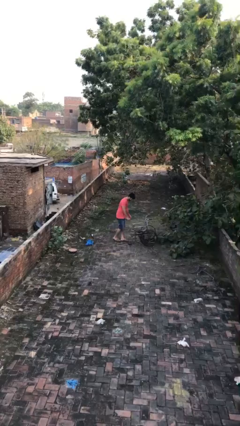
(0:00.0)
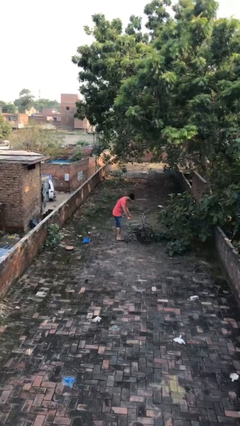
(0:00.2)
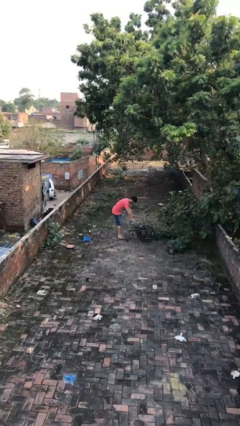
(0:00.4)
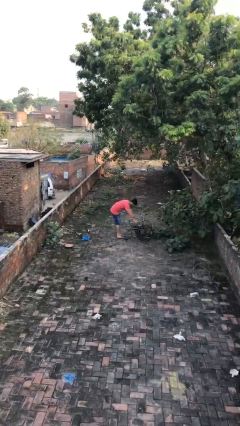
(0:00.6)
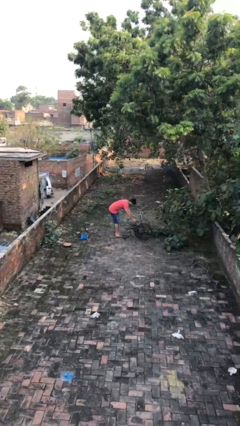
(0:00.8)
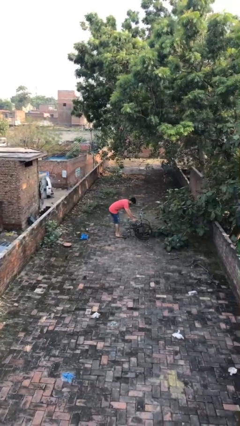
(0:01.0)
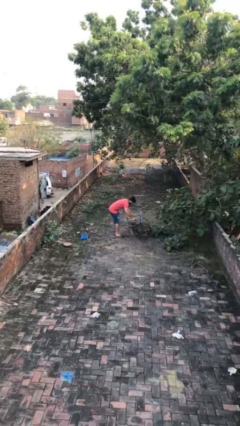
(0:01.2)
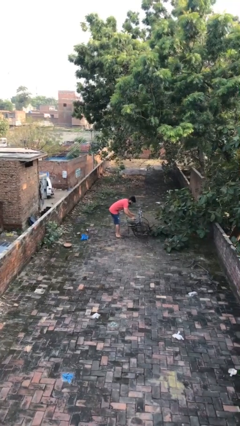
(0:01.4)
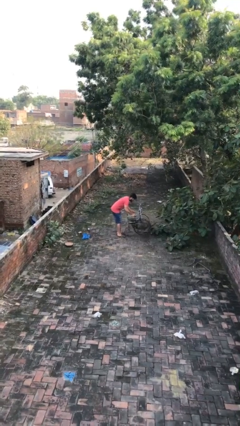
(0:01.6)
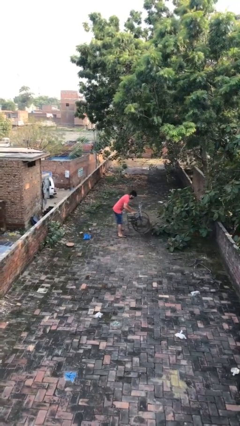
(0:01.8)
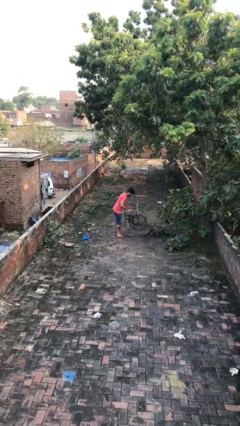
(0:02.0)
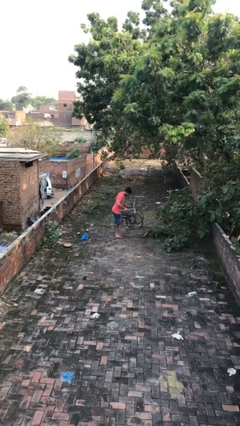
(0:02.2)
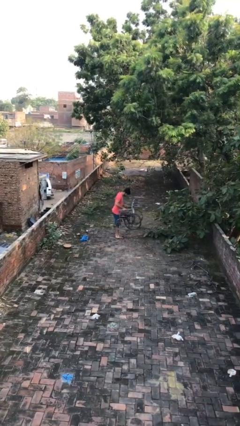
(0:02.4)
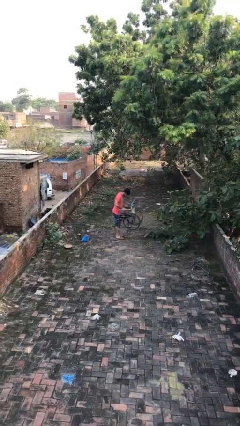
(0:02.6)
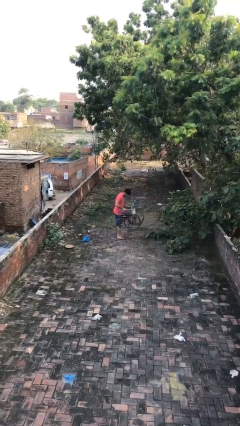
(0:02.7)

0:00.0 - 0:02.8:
person picks up object from floor

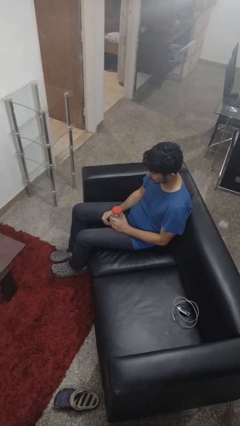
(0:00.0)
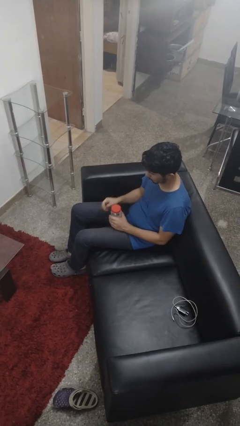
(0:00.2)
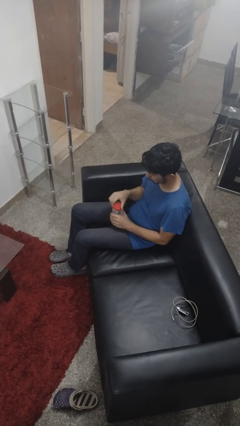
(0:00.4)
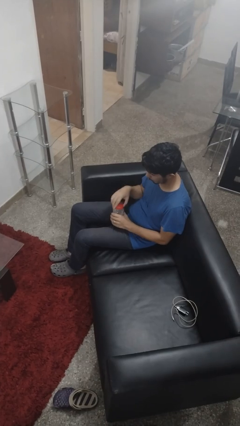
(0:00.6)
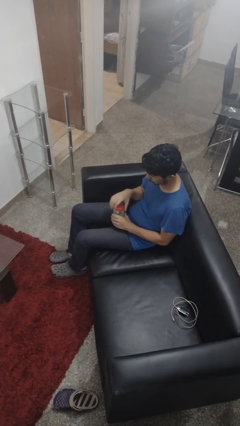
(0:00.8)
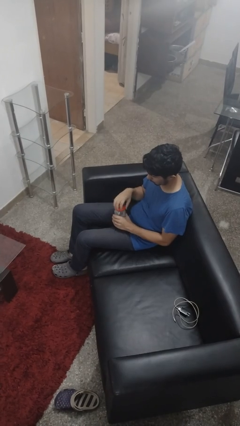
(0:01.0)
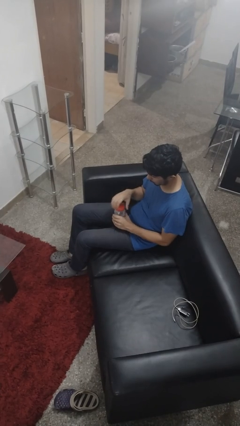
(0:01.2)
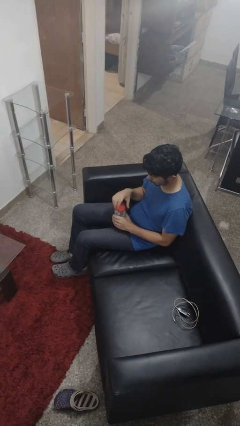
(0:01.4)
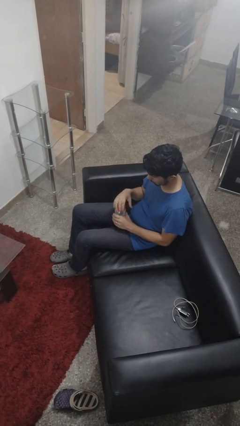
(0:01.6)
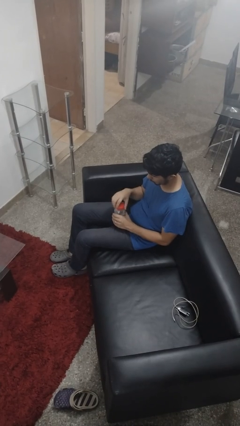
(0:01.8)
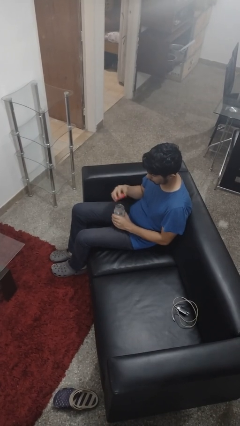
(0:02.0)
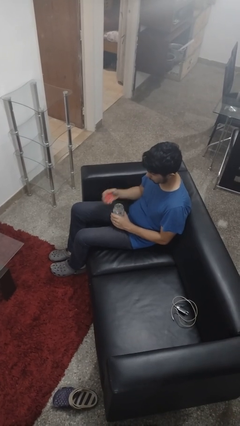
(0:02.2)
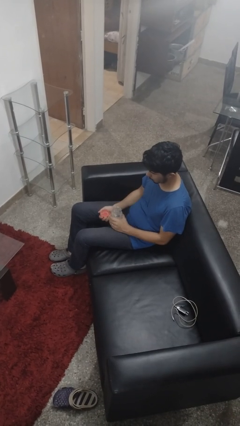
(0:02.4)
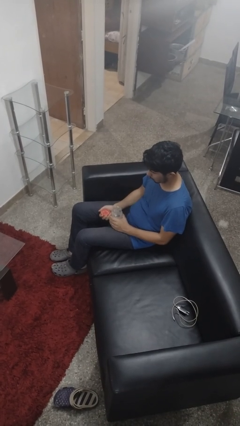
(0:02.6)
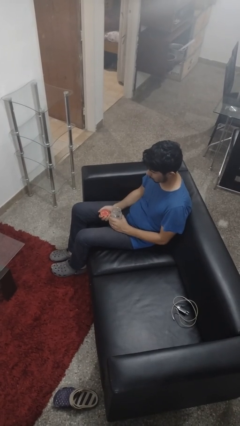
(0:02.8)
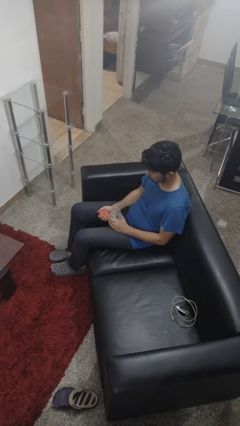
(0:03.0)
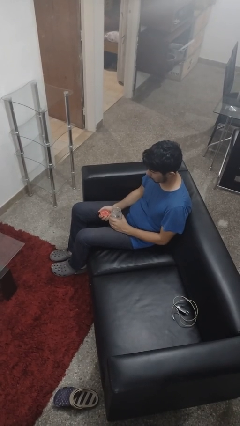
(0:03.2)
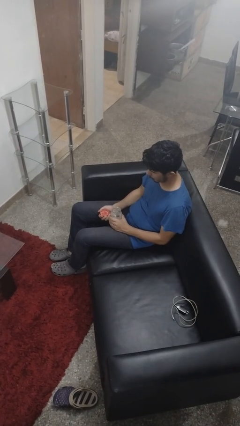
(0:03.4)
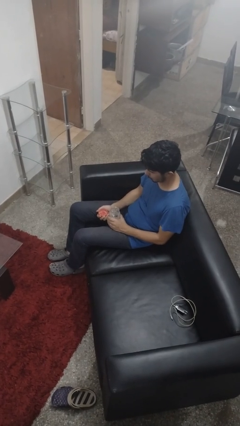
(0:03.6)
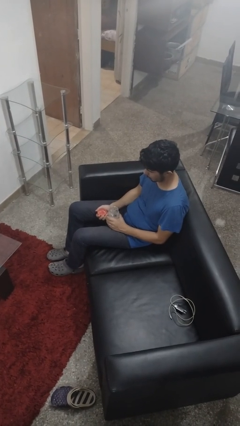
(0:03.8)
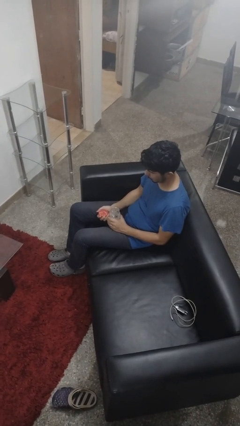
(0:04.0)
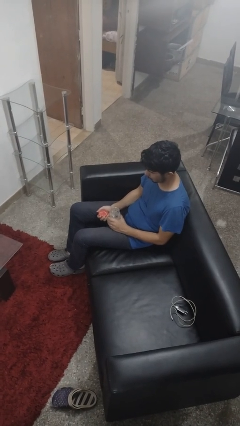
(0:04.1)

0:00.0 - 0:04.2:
person opens jar

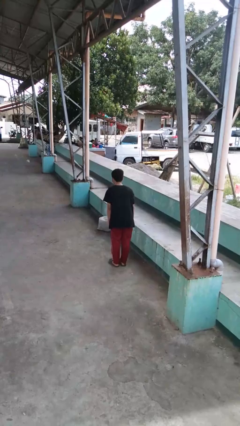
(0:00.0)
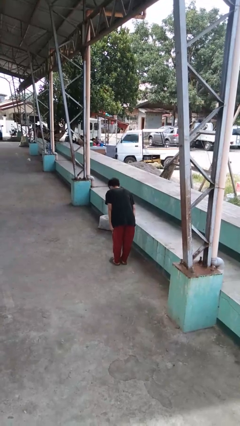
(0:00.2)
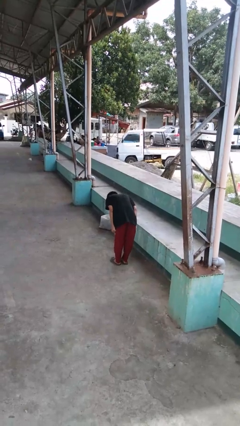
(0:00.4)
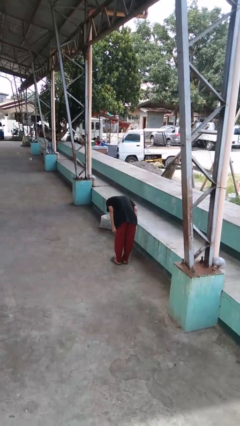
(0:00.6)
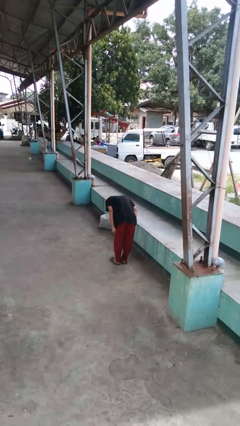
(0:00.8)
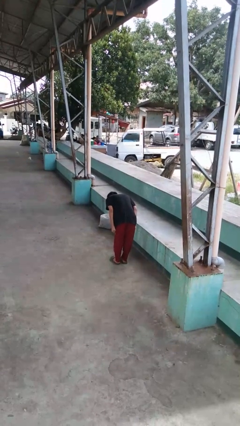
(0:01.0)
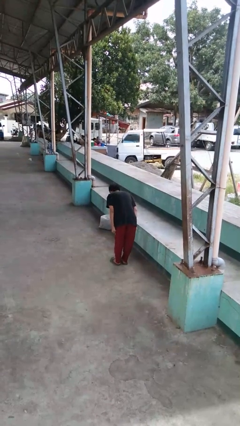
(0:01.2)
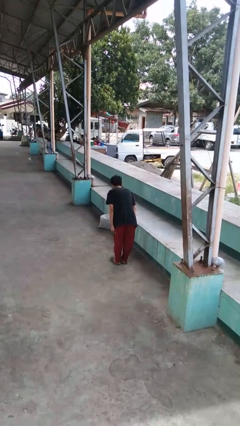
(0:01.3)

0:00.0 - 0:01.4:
person bows

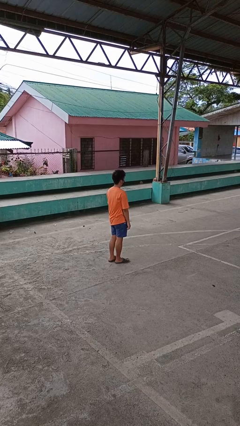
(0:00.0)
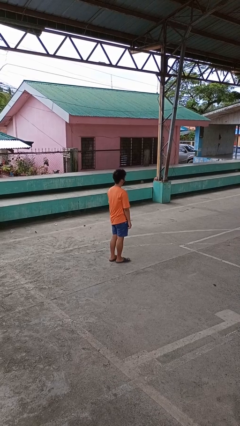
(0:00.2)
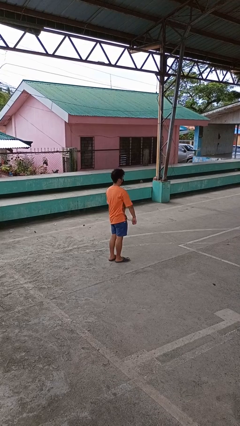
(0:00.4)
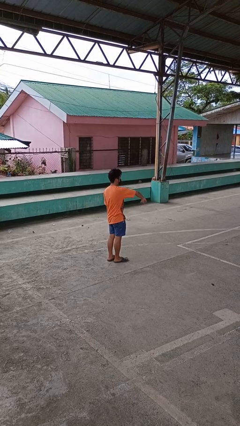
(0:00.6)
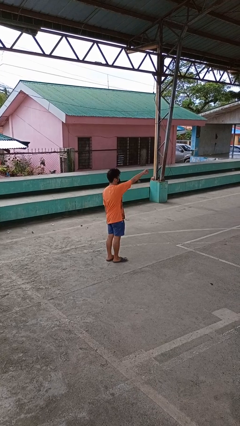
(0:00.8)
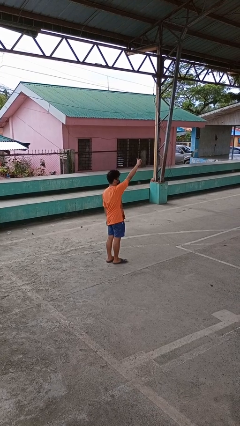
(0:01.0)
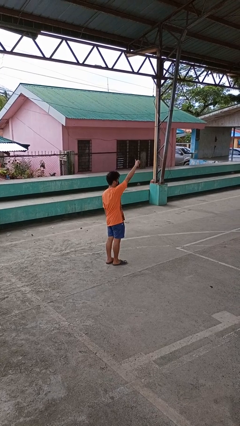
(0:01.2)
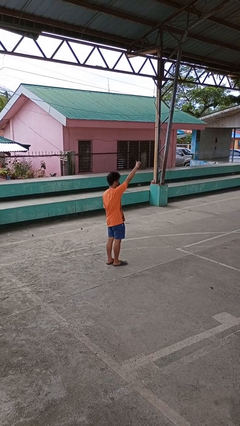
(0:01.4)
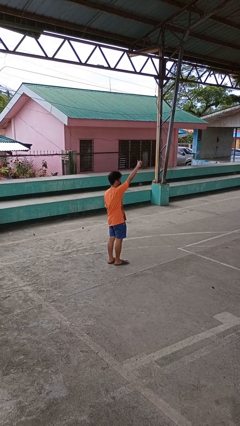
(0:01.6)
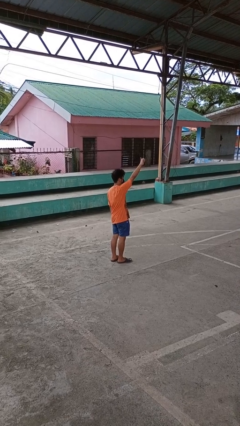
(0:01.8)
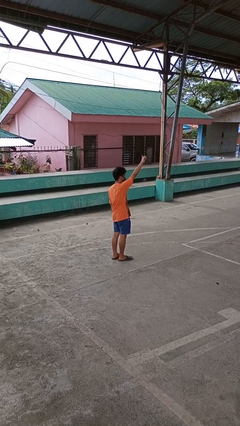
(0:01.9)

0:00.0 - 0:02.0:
person gestures swipe up

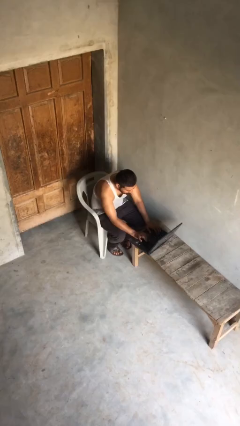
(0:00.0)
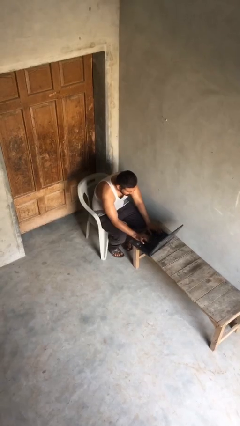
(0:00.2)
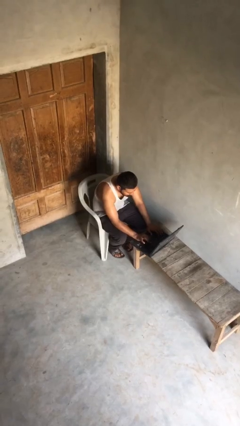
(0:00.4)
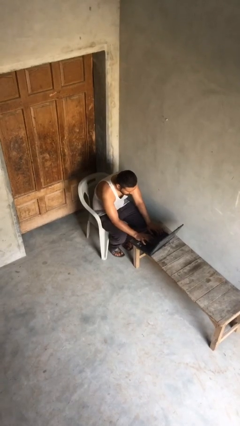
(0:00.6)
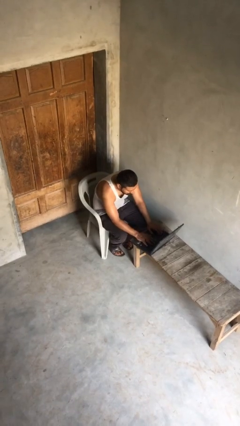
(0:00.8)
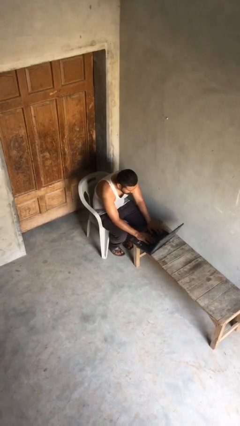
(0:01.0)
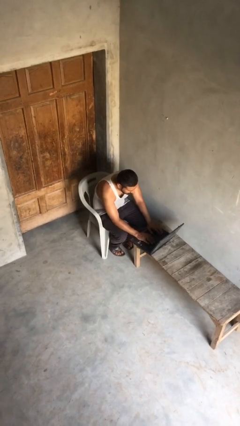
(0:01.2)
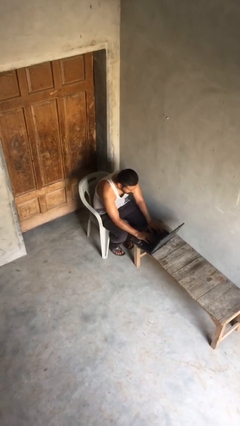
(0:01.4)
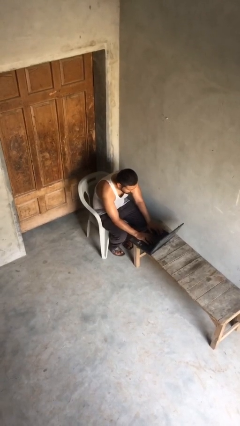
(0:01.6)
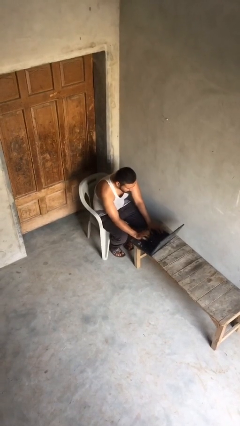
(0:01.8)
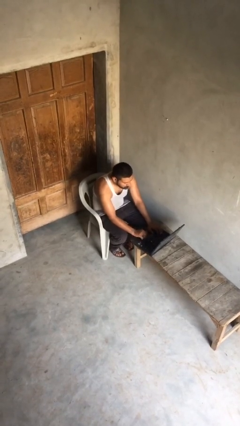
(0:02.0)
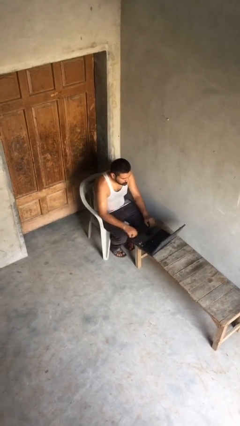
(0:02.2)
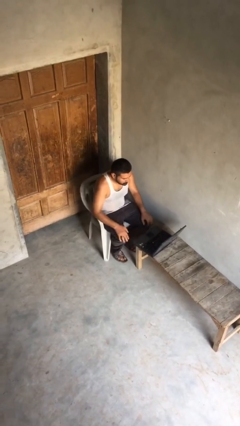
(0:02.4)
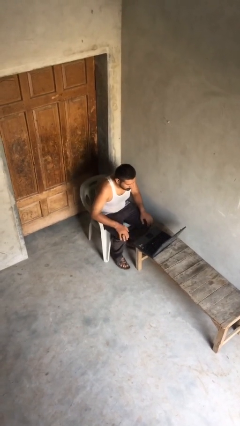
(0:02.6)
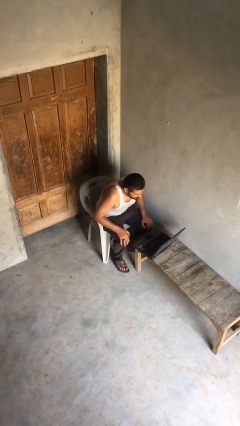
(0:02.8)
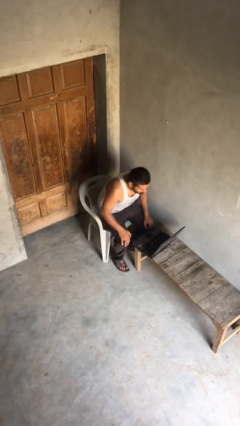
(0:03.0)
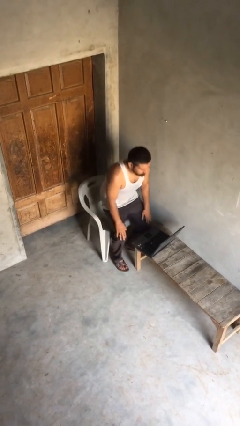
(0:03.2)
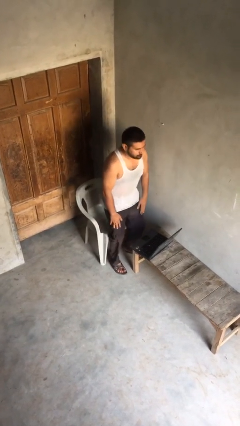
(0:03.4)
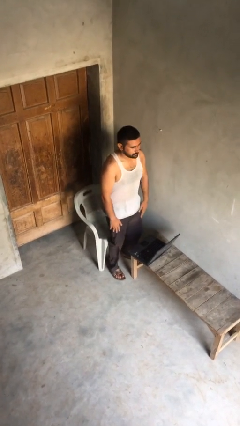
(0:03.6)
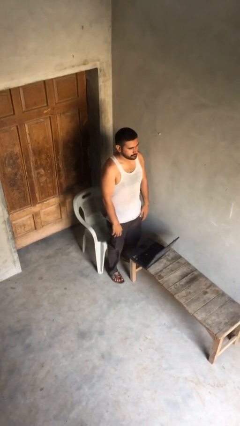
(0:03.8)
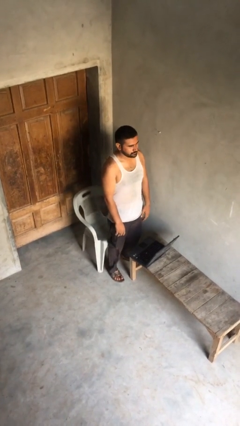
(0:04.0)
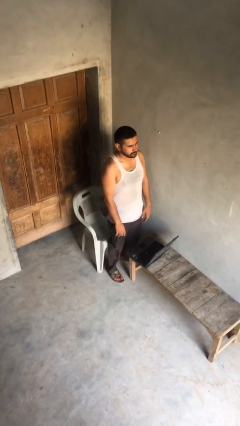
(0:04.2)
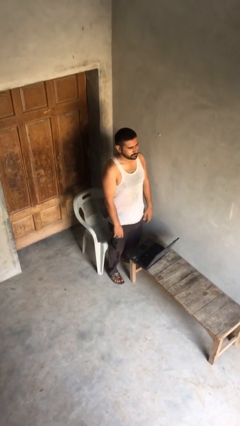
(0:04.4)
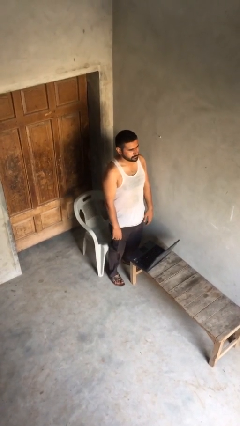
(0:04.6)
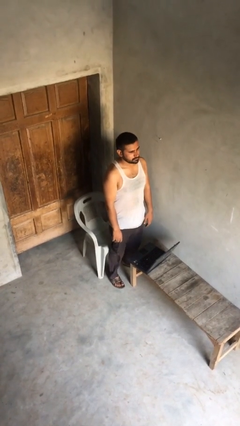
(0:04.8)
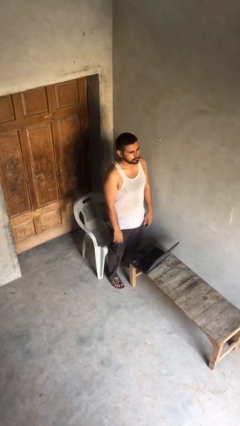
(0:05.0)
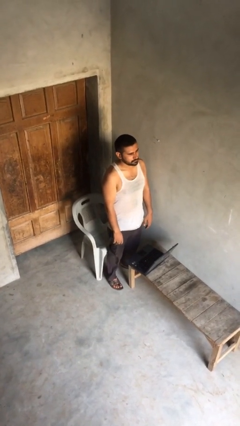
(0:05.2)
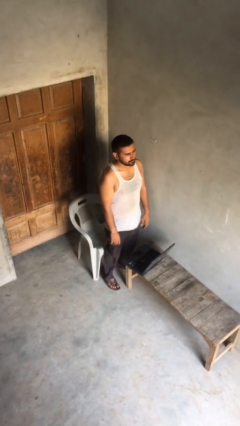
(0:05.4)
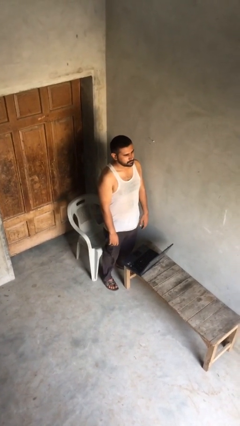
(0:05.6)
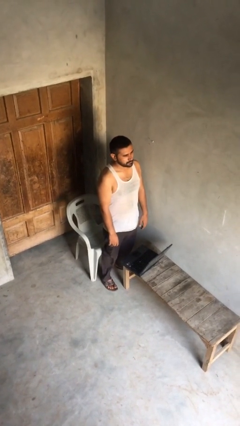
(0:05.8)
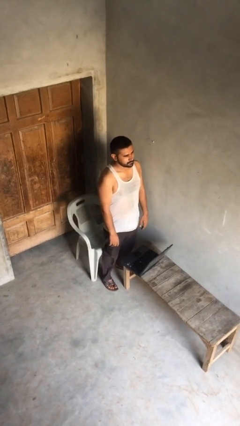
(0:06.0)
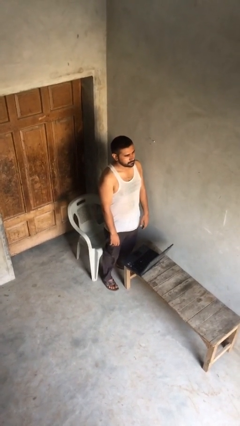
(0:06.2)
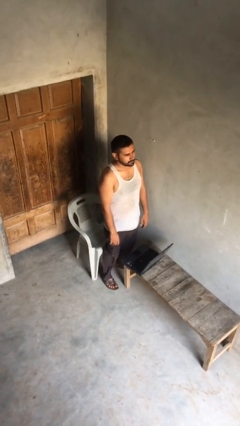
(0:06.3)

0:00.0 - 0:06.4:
person stands up

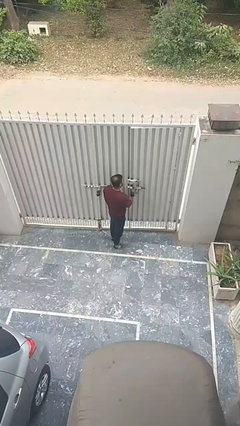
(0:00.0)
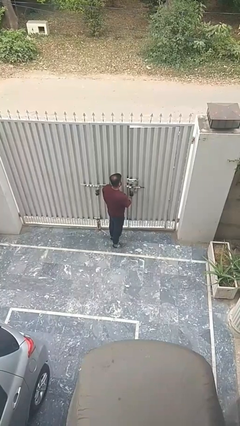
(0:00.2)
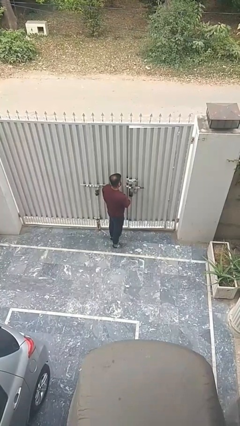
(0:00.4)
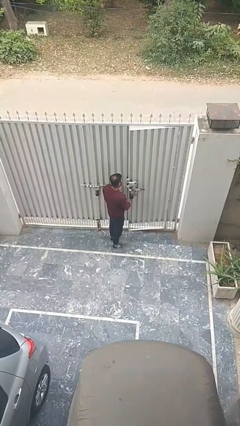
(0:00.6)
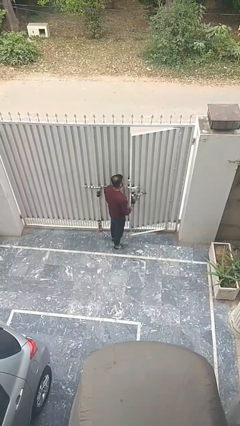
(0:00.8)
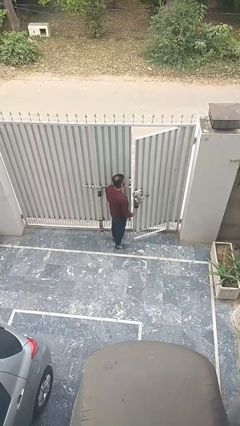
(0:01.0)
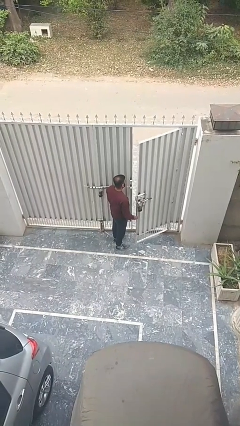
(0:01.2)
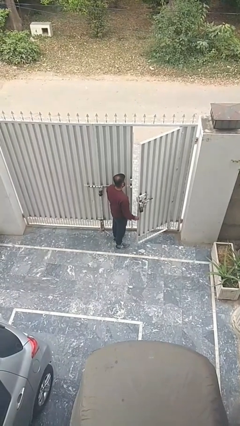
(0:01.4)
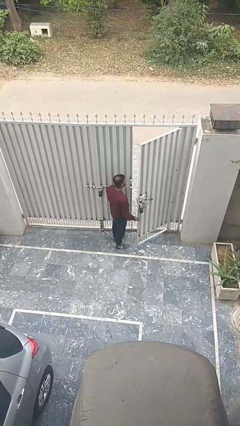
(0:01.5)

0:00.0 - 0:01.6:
person opens facility door
